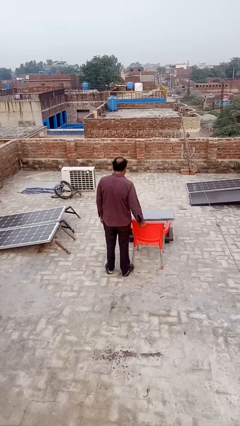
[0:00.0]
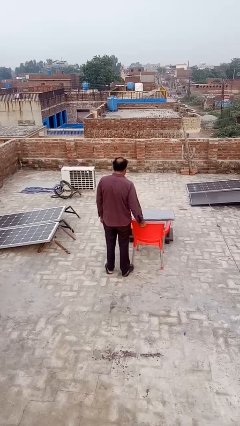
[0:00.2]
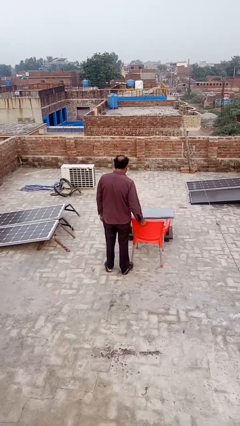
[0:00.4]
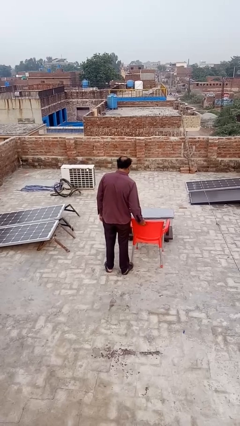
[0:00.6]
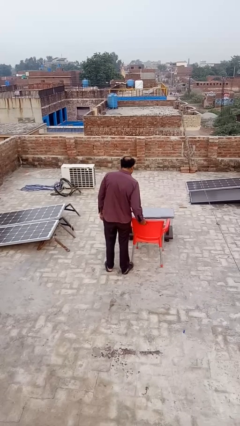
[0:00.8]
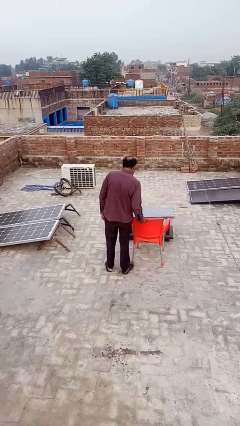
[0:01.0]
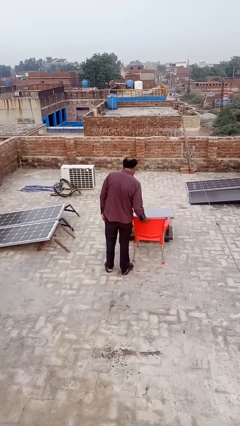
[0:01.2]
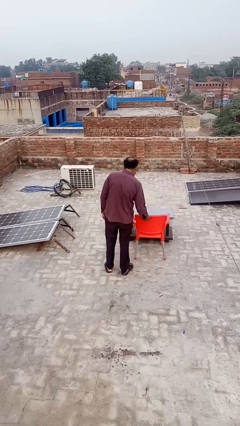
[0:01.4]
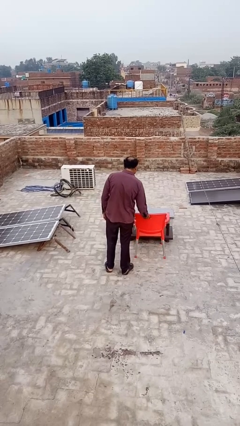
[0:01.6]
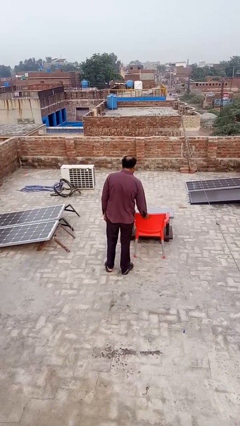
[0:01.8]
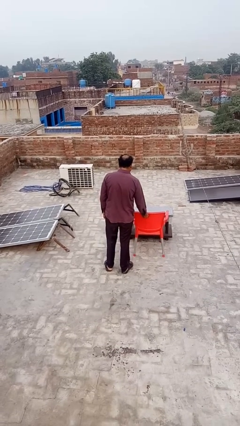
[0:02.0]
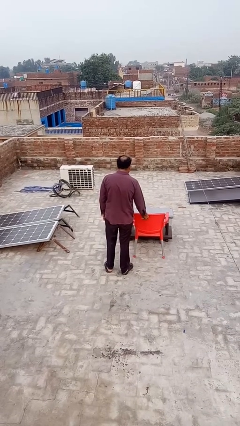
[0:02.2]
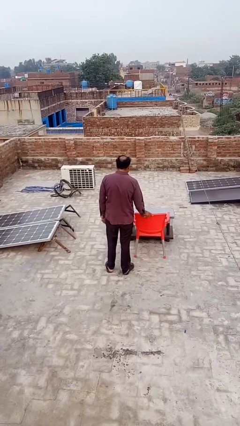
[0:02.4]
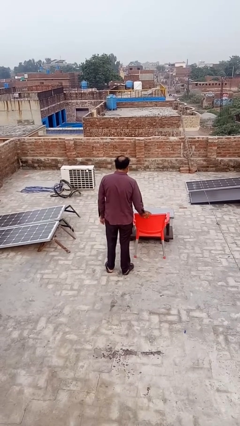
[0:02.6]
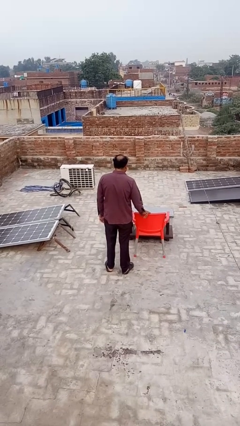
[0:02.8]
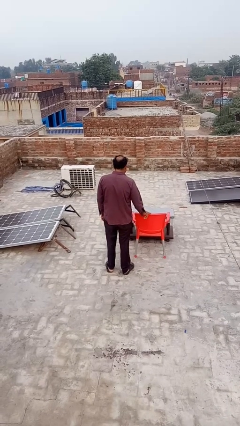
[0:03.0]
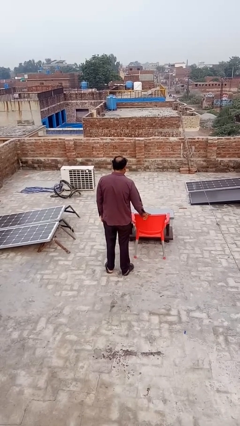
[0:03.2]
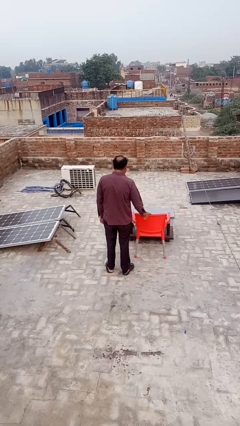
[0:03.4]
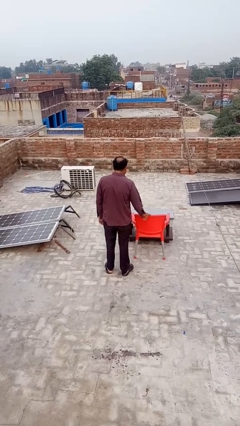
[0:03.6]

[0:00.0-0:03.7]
person pushes in chair

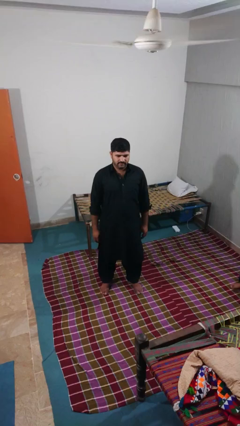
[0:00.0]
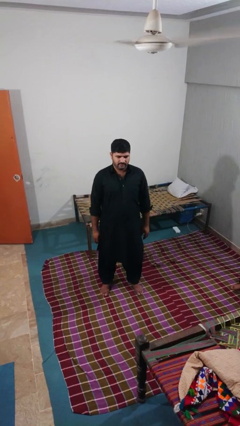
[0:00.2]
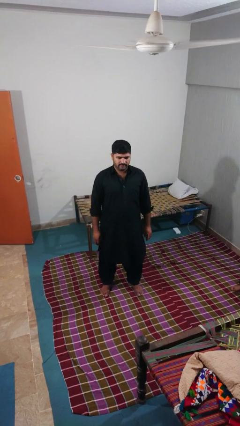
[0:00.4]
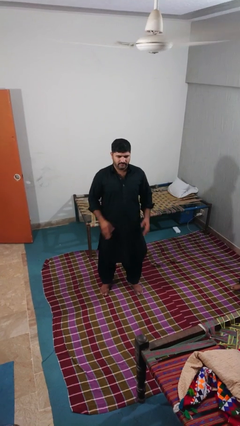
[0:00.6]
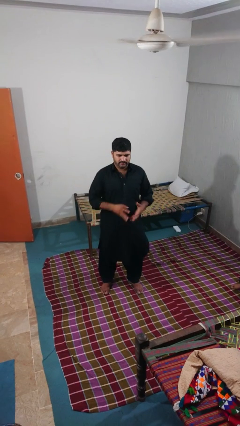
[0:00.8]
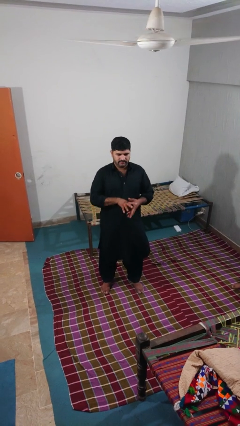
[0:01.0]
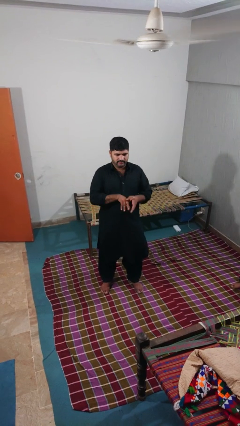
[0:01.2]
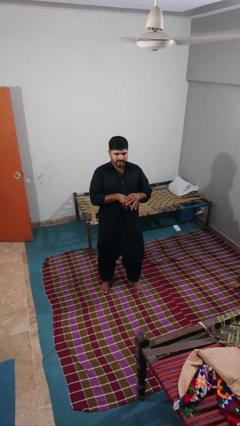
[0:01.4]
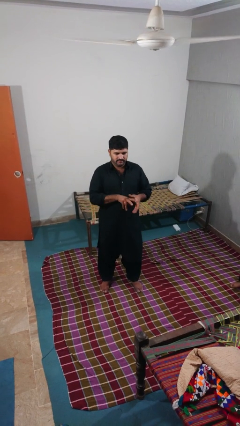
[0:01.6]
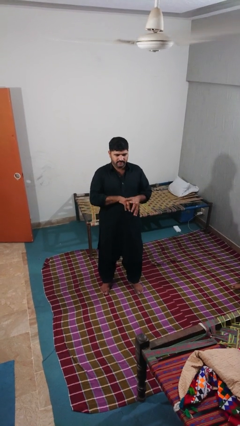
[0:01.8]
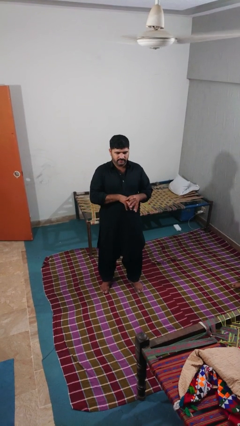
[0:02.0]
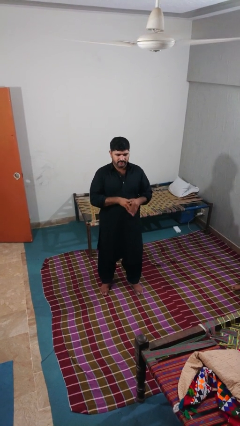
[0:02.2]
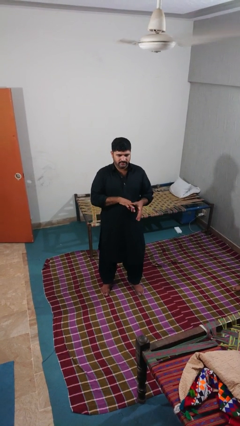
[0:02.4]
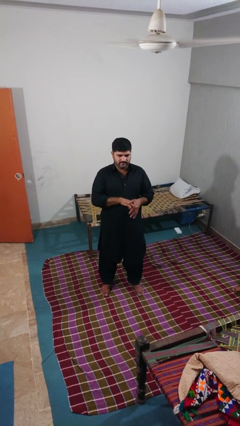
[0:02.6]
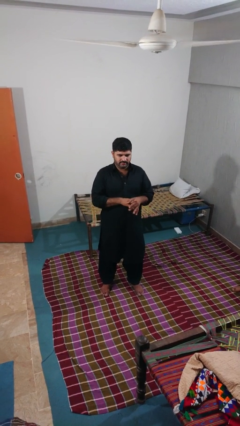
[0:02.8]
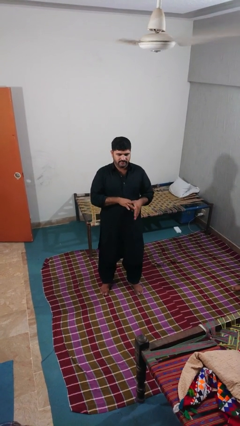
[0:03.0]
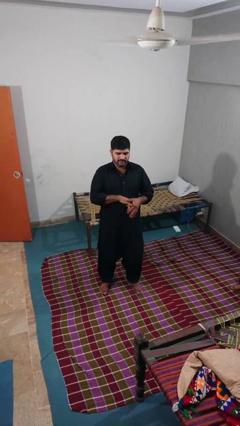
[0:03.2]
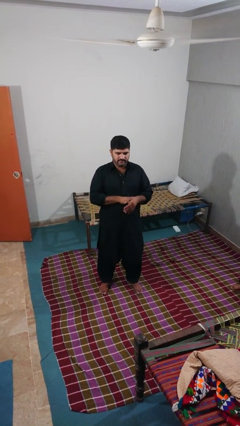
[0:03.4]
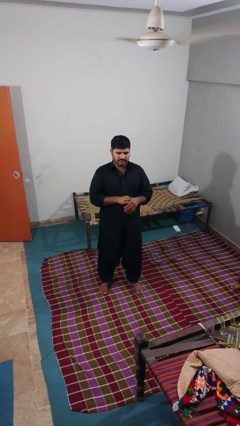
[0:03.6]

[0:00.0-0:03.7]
person cracks knuckles

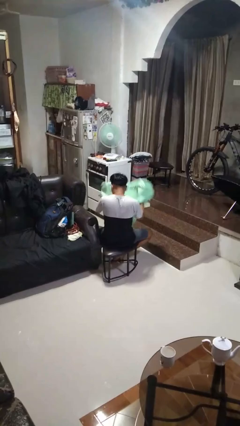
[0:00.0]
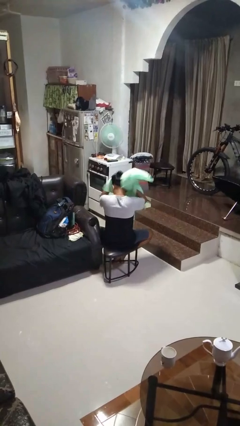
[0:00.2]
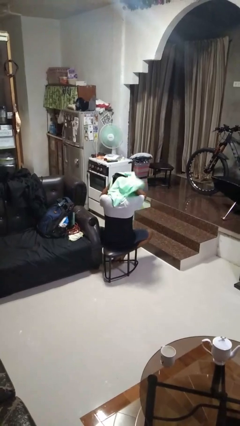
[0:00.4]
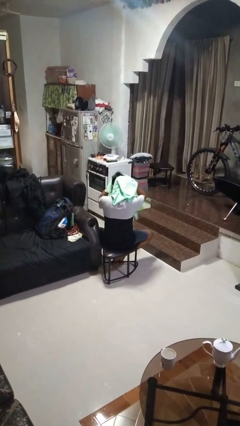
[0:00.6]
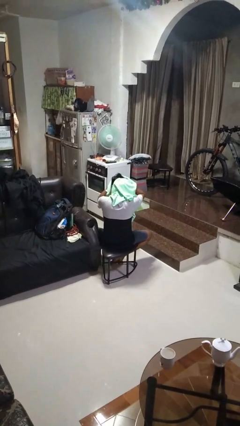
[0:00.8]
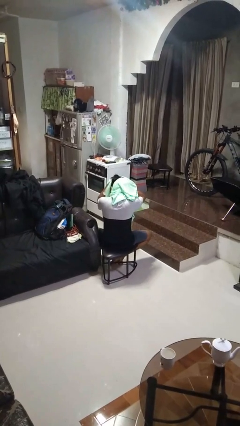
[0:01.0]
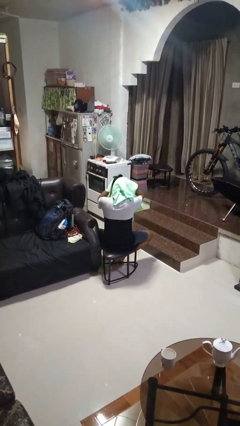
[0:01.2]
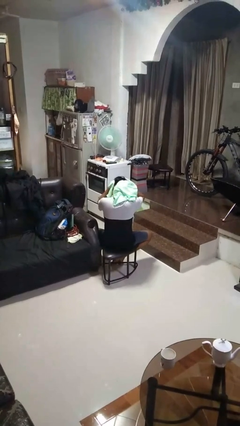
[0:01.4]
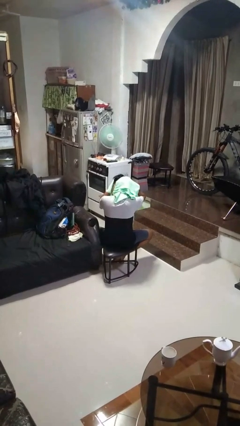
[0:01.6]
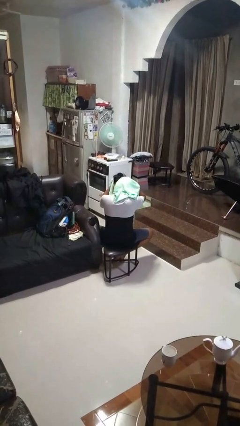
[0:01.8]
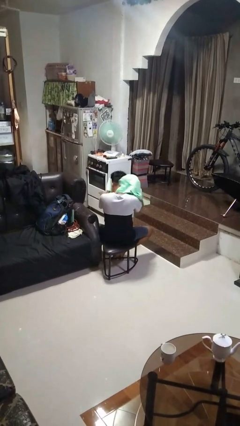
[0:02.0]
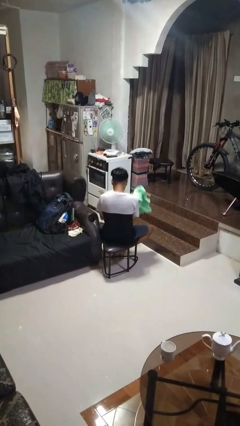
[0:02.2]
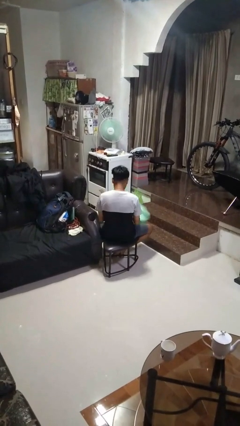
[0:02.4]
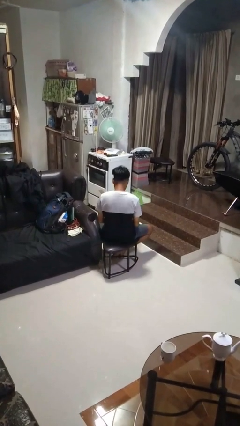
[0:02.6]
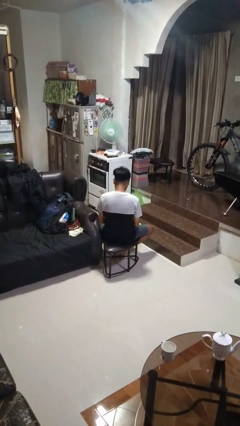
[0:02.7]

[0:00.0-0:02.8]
person dries hair with towel

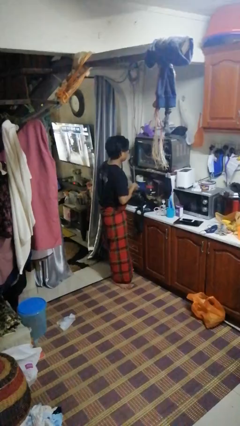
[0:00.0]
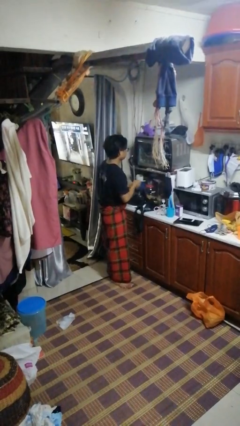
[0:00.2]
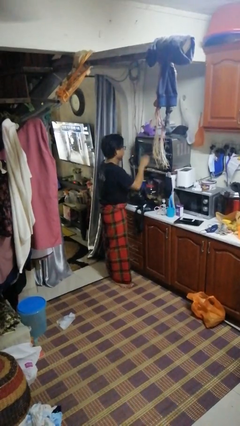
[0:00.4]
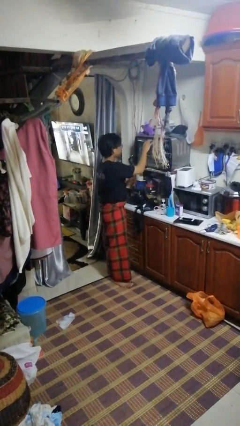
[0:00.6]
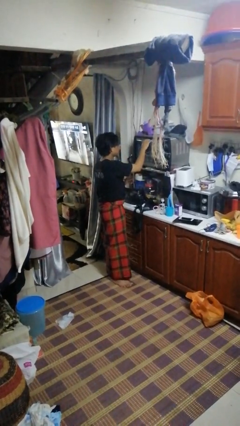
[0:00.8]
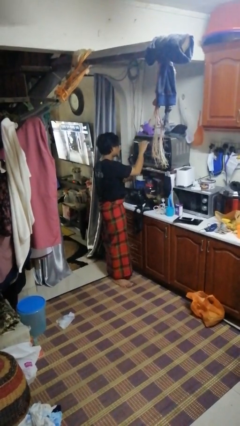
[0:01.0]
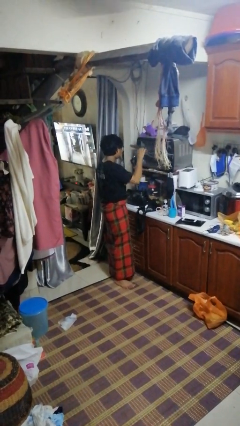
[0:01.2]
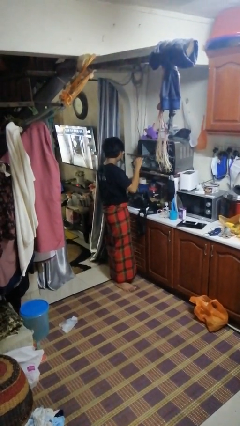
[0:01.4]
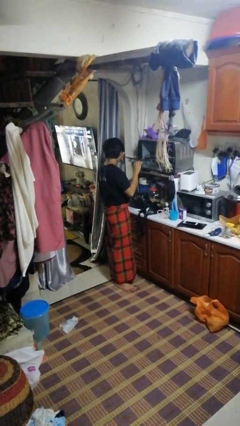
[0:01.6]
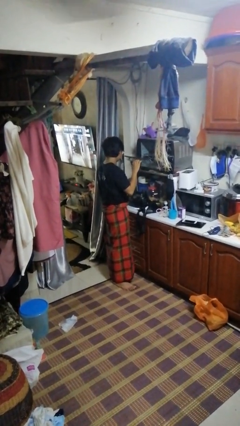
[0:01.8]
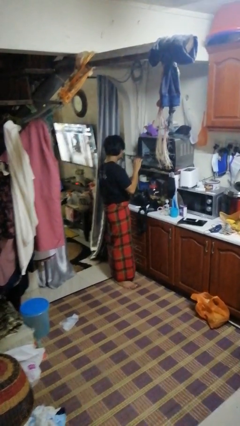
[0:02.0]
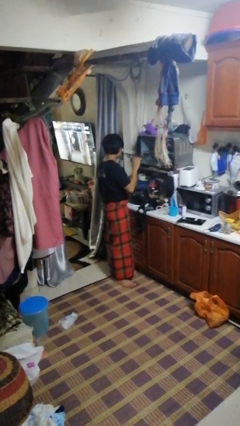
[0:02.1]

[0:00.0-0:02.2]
person opens oven door

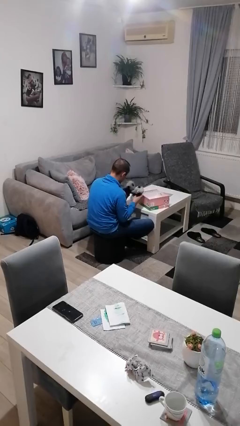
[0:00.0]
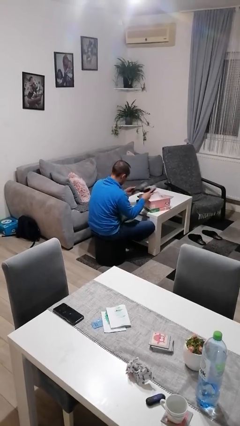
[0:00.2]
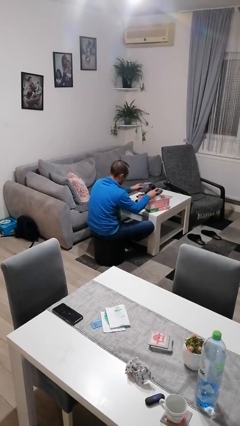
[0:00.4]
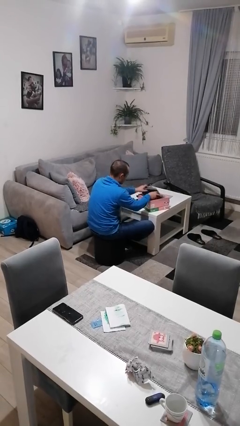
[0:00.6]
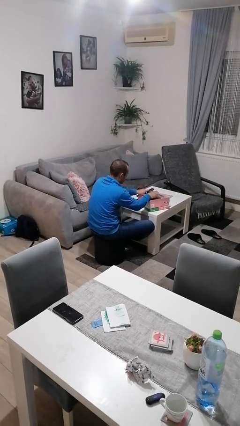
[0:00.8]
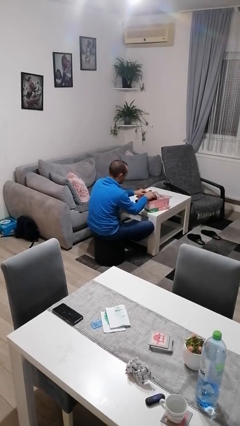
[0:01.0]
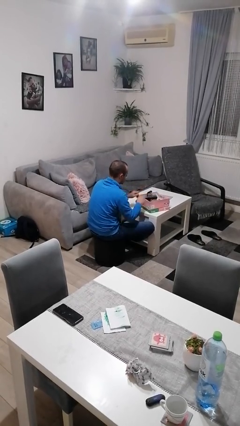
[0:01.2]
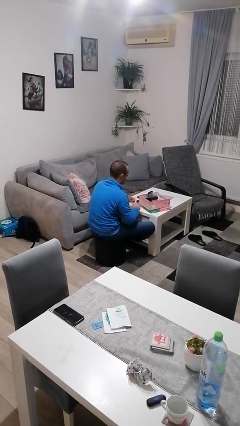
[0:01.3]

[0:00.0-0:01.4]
person puts object into box

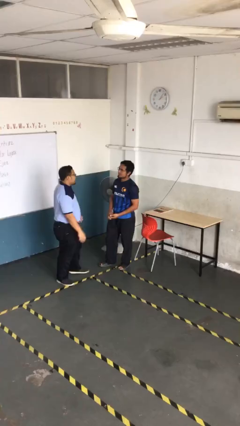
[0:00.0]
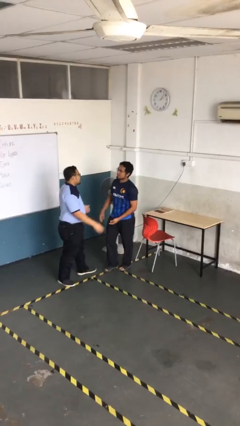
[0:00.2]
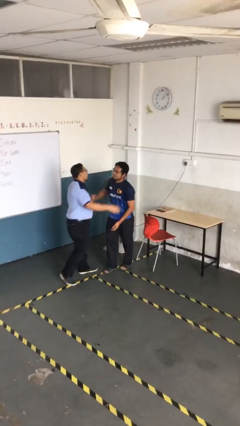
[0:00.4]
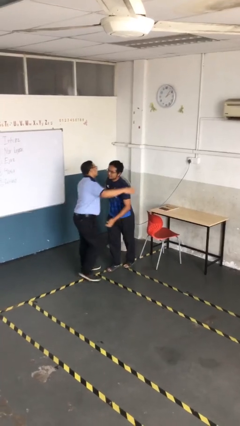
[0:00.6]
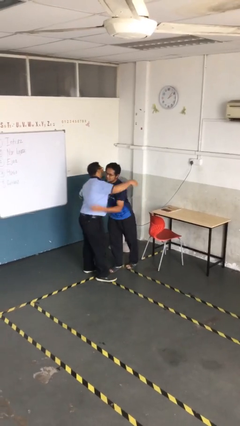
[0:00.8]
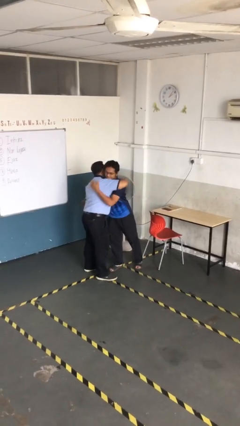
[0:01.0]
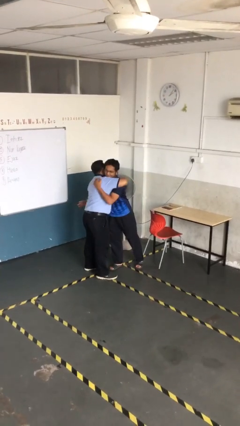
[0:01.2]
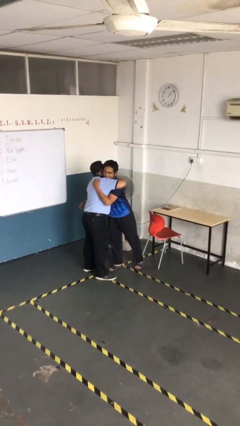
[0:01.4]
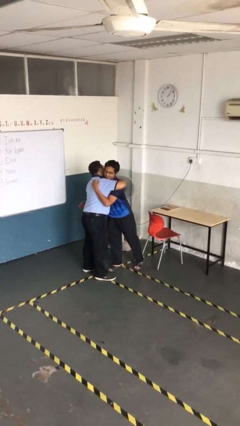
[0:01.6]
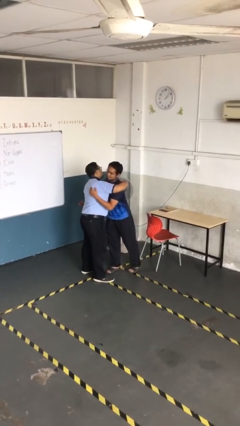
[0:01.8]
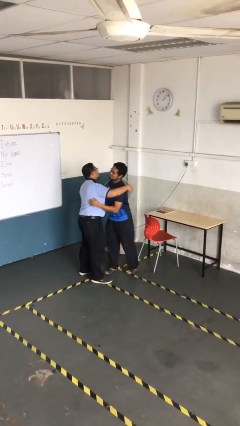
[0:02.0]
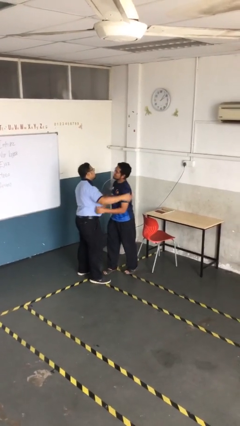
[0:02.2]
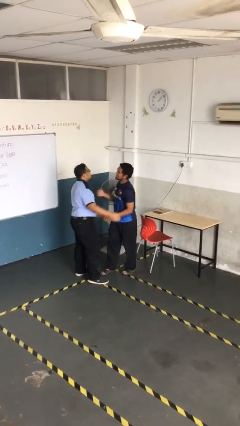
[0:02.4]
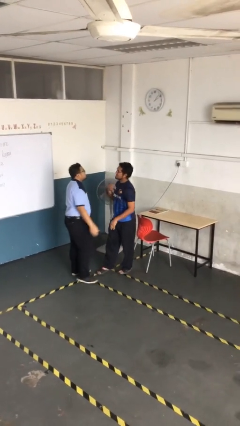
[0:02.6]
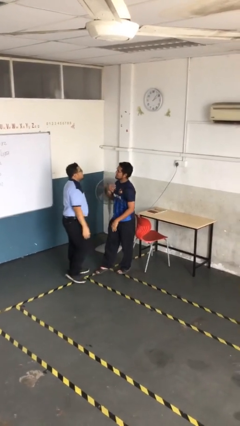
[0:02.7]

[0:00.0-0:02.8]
person embraces person

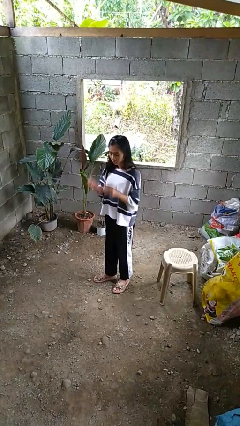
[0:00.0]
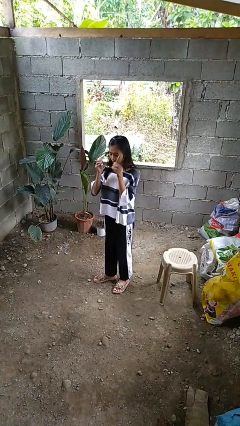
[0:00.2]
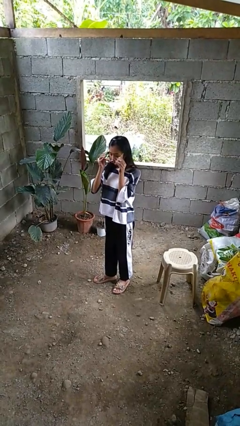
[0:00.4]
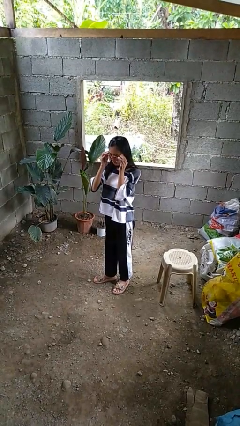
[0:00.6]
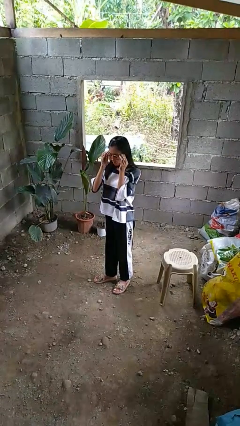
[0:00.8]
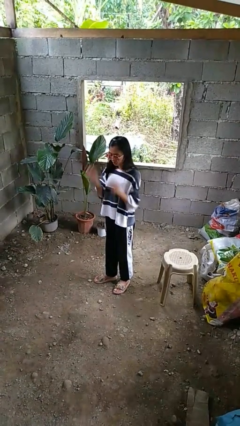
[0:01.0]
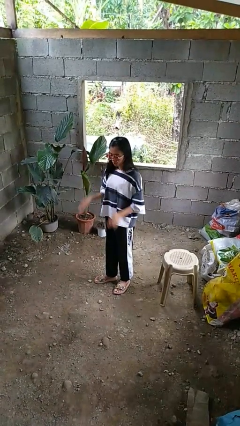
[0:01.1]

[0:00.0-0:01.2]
person puts on sunglasses
